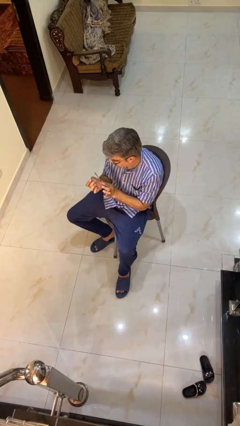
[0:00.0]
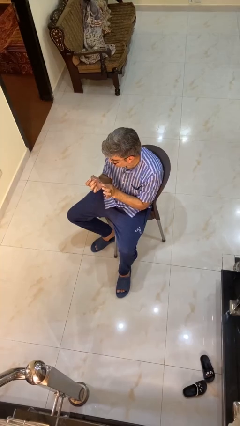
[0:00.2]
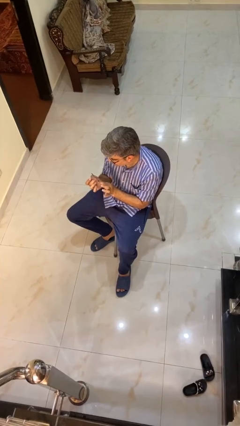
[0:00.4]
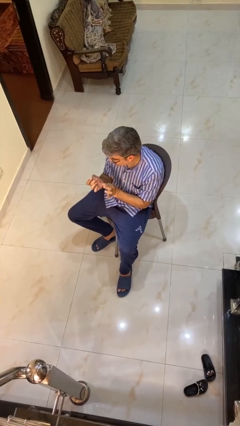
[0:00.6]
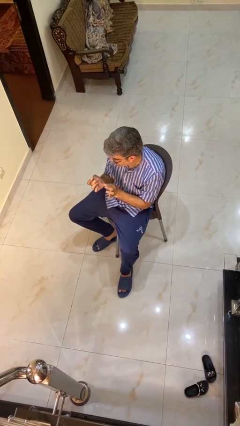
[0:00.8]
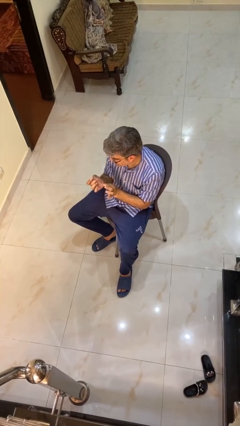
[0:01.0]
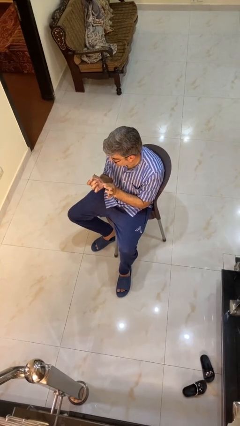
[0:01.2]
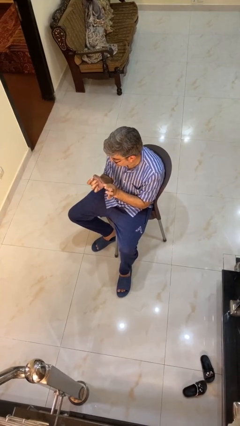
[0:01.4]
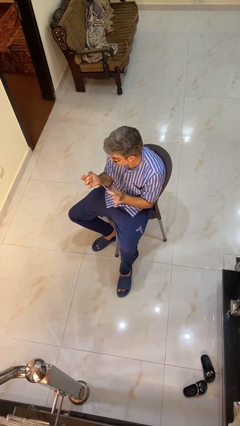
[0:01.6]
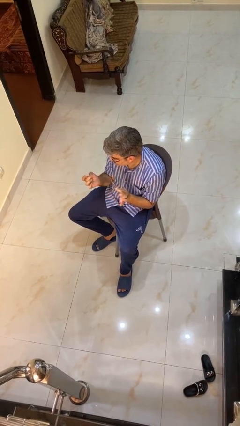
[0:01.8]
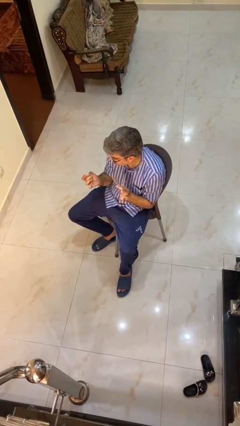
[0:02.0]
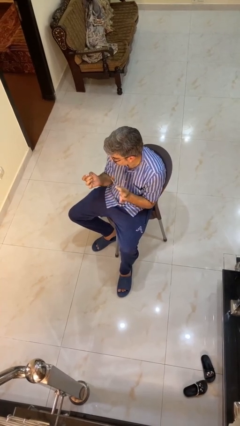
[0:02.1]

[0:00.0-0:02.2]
person files fingernails

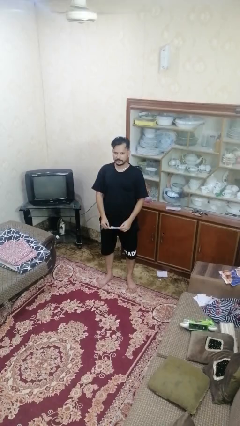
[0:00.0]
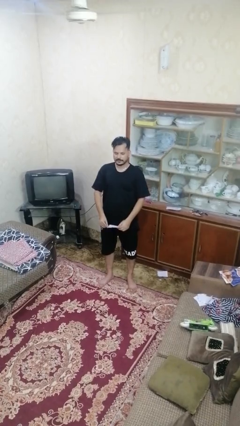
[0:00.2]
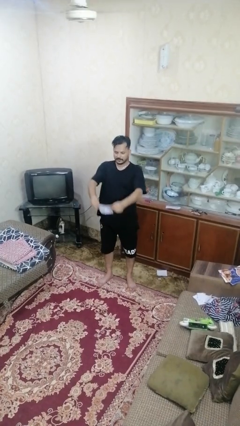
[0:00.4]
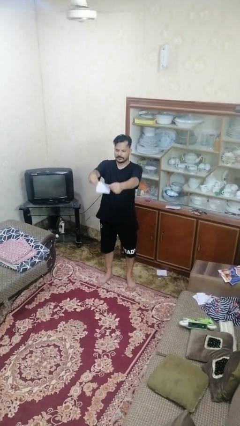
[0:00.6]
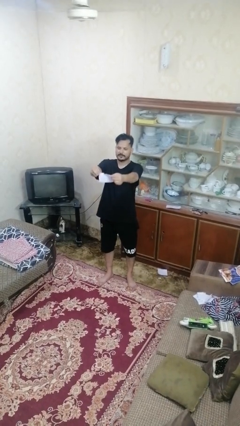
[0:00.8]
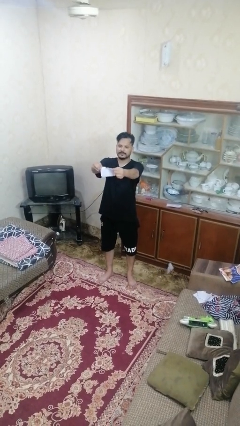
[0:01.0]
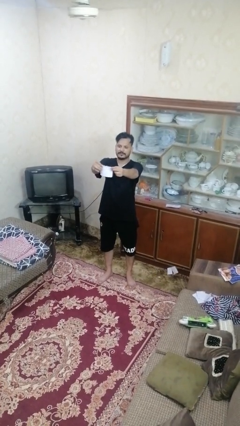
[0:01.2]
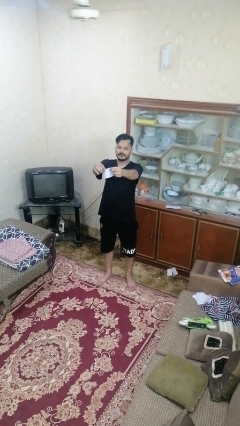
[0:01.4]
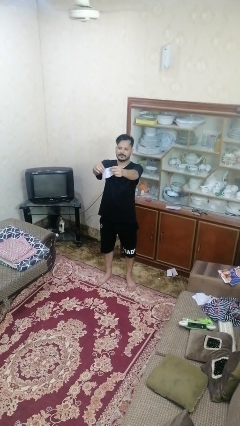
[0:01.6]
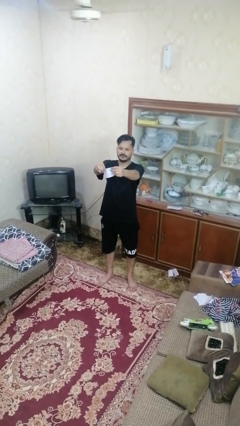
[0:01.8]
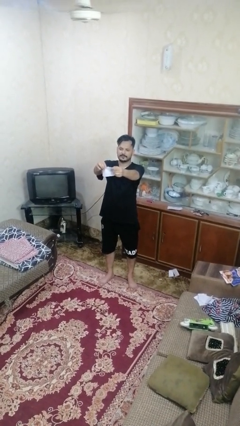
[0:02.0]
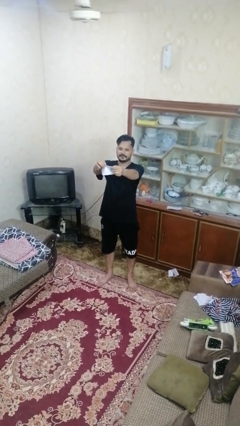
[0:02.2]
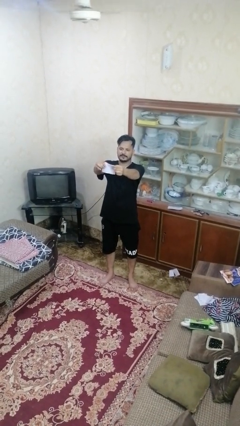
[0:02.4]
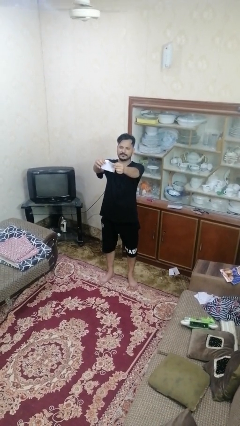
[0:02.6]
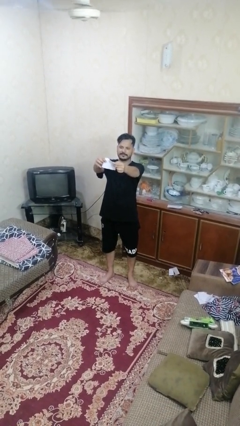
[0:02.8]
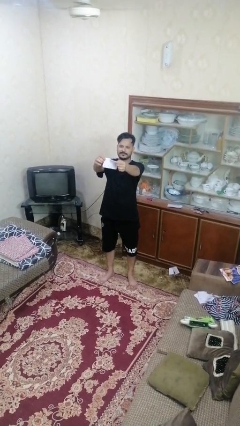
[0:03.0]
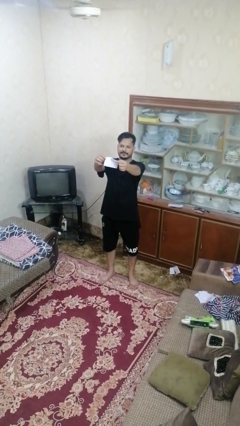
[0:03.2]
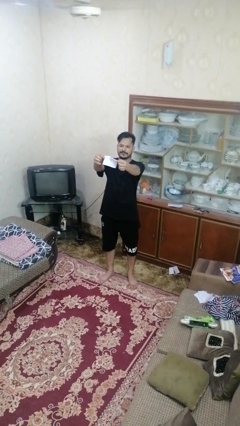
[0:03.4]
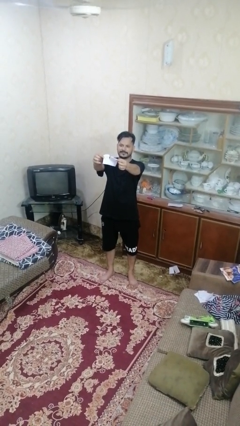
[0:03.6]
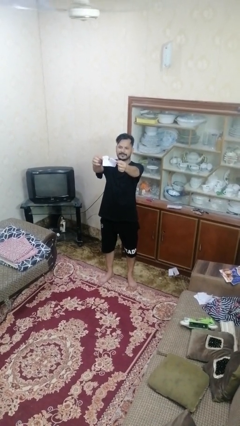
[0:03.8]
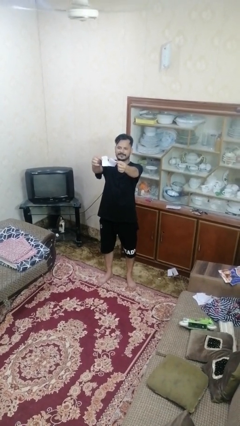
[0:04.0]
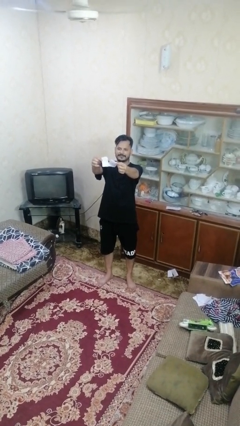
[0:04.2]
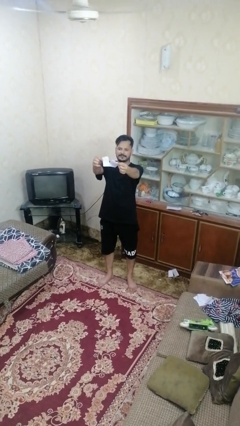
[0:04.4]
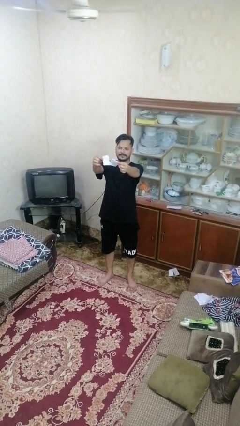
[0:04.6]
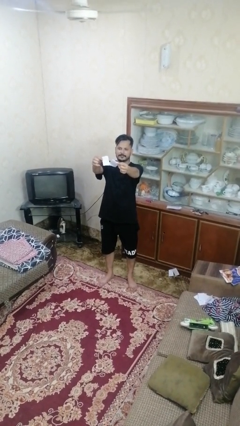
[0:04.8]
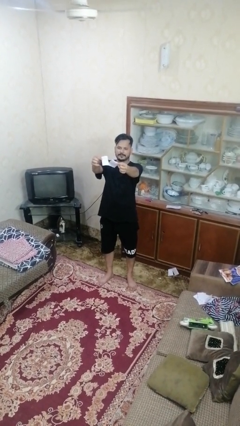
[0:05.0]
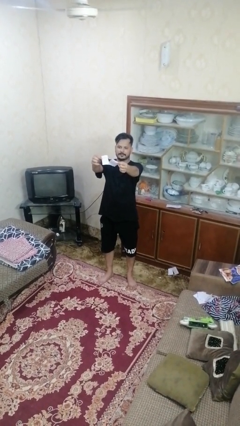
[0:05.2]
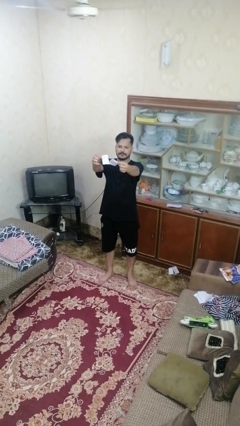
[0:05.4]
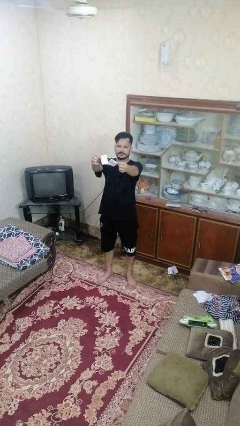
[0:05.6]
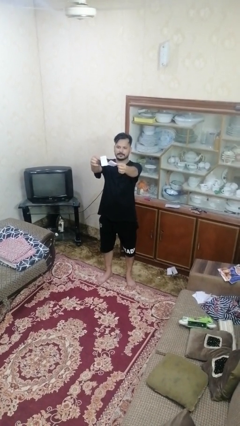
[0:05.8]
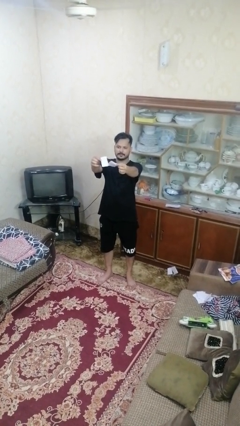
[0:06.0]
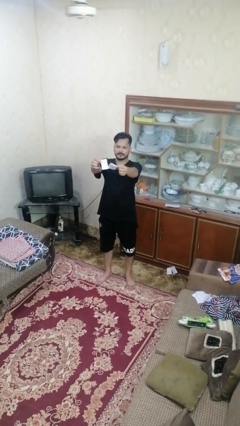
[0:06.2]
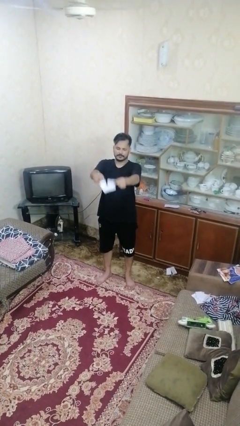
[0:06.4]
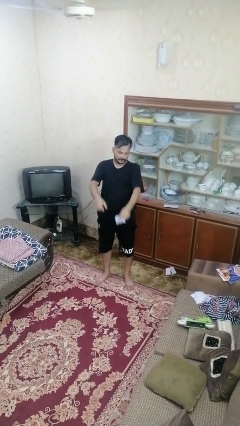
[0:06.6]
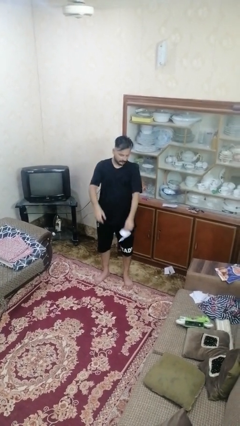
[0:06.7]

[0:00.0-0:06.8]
person tears paper

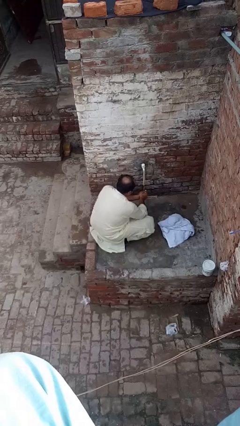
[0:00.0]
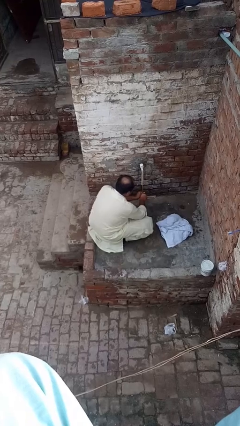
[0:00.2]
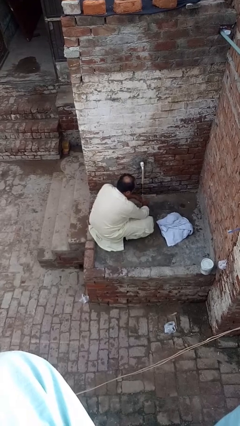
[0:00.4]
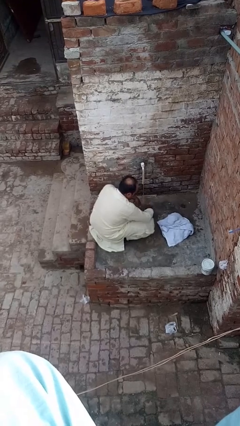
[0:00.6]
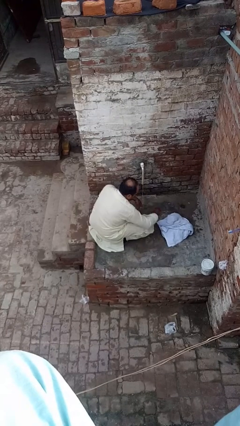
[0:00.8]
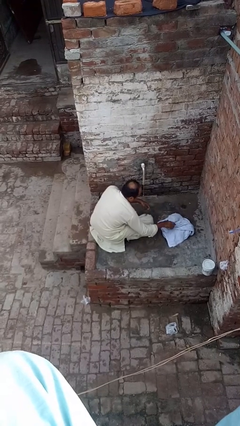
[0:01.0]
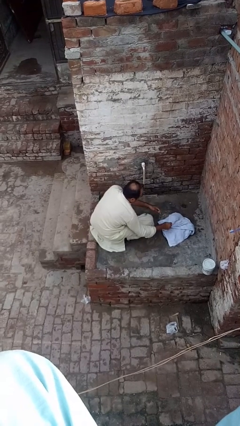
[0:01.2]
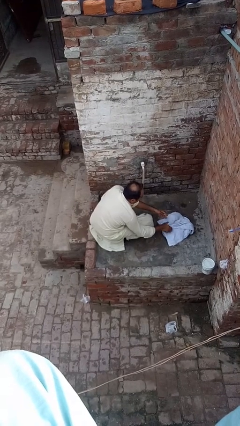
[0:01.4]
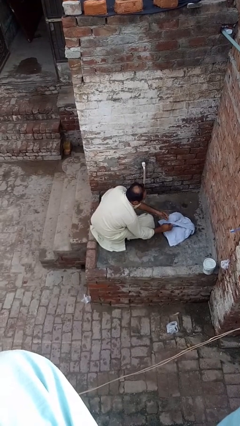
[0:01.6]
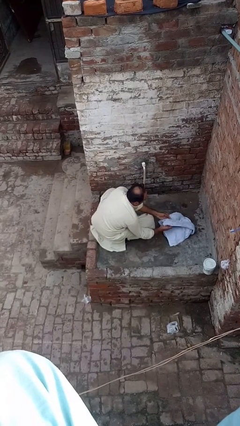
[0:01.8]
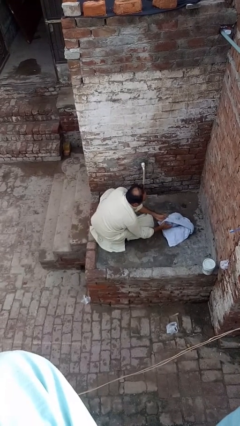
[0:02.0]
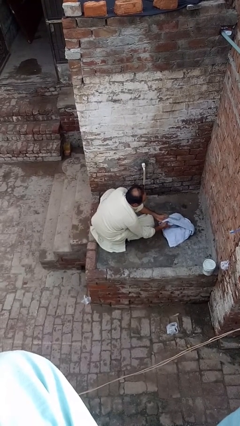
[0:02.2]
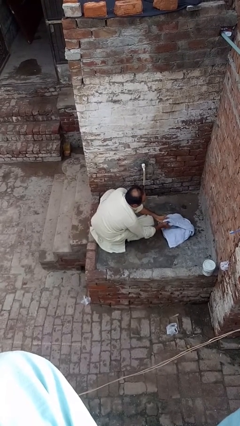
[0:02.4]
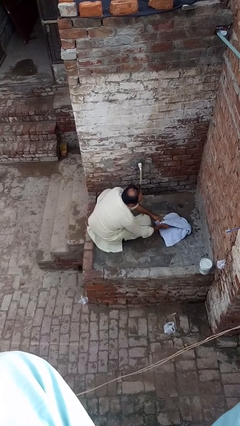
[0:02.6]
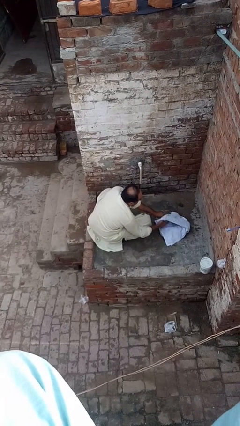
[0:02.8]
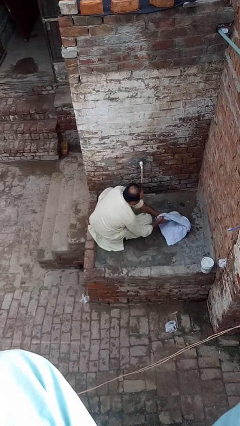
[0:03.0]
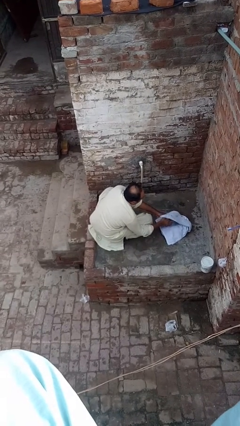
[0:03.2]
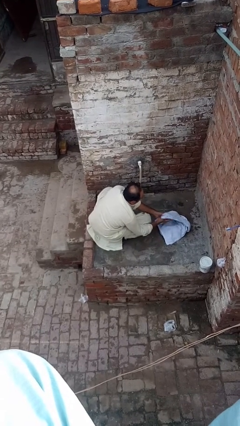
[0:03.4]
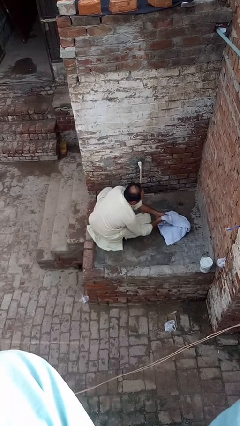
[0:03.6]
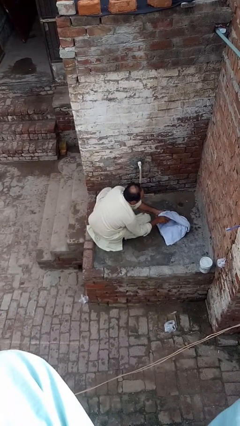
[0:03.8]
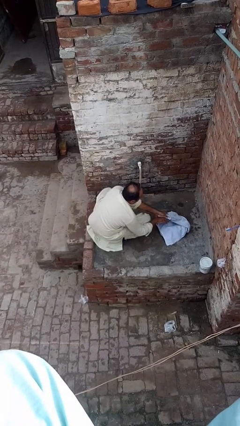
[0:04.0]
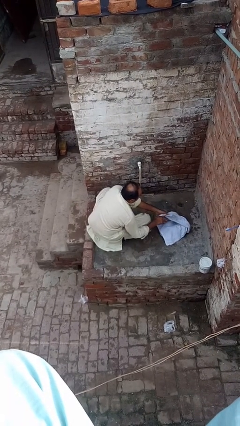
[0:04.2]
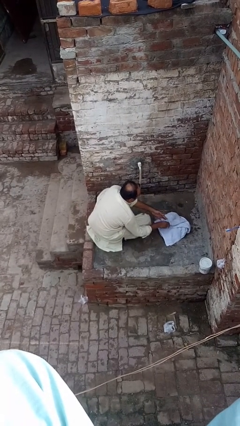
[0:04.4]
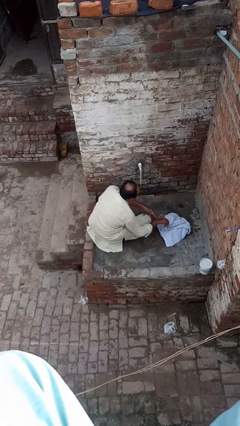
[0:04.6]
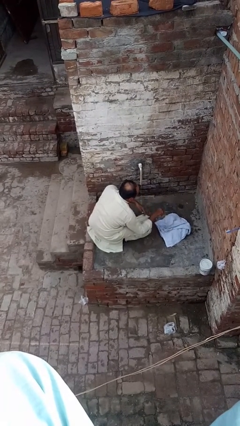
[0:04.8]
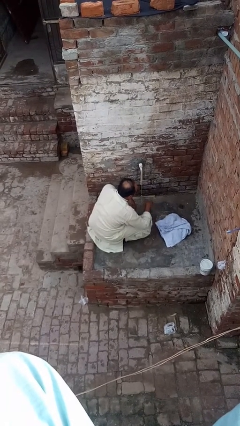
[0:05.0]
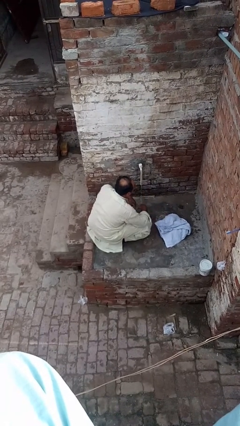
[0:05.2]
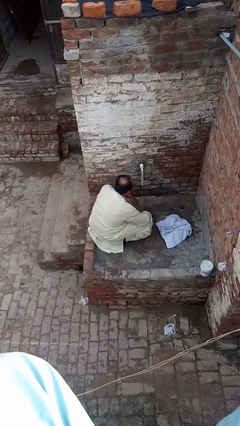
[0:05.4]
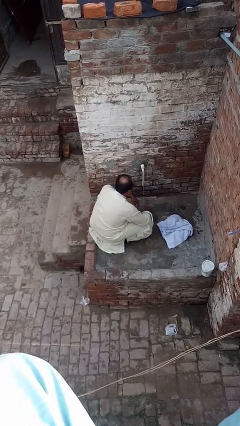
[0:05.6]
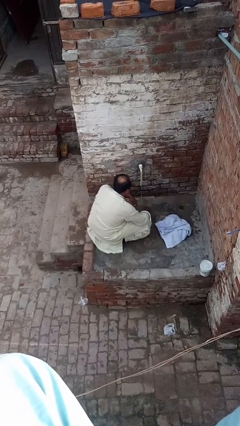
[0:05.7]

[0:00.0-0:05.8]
person dries hands with towel

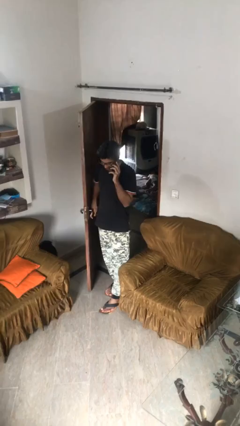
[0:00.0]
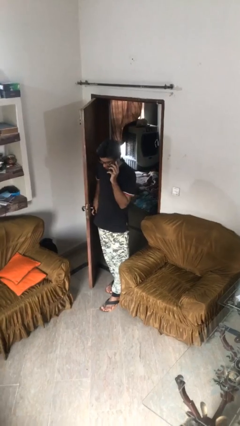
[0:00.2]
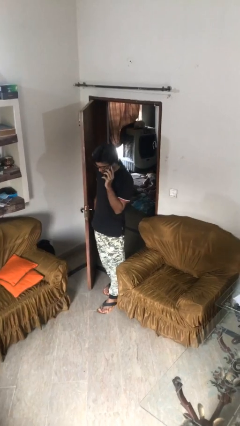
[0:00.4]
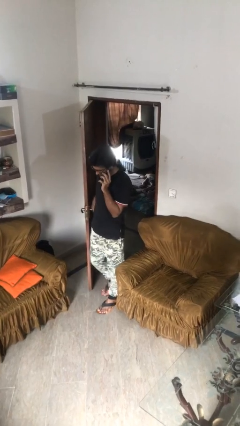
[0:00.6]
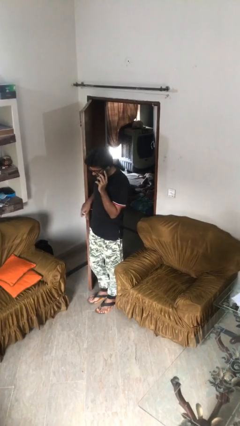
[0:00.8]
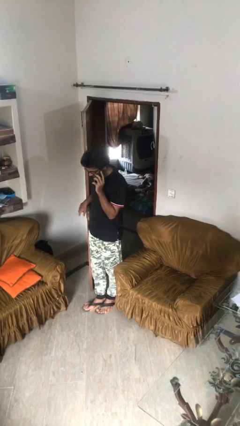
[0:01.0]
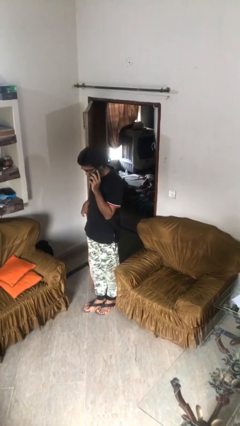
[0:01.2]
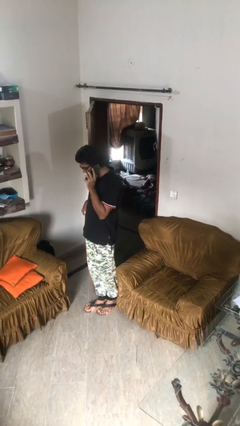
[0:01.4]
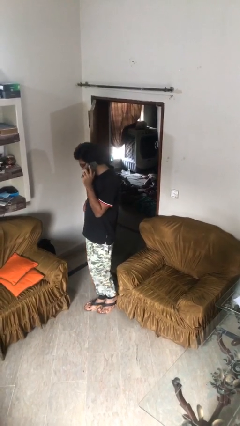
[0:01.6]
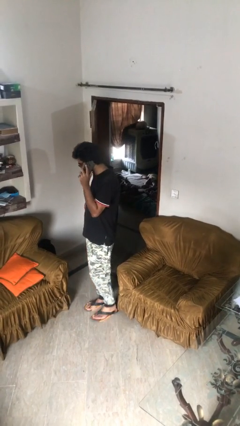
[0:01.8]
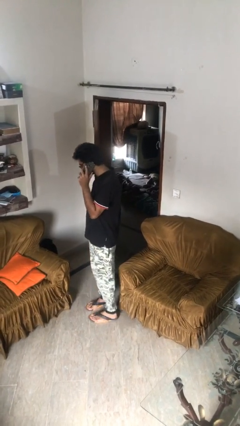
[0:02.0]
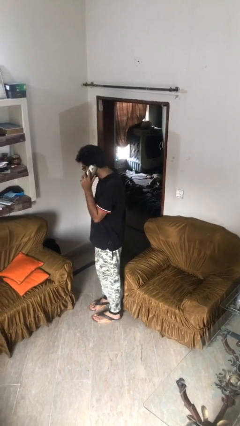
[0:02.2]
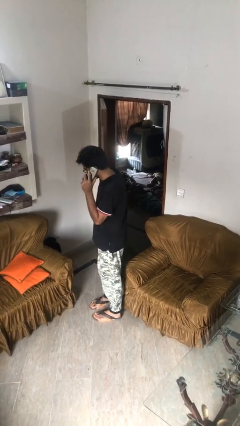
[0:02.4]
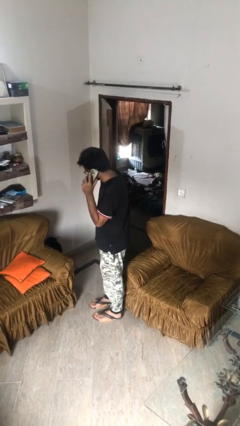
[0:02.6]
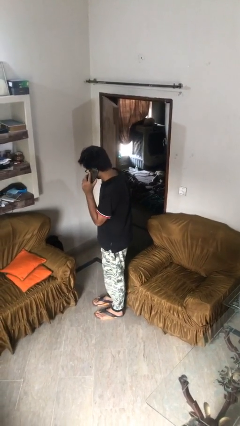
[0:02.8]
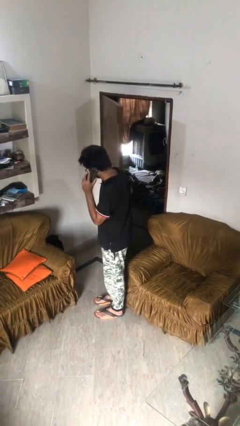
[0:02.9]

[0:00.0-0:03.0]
person enters scene through structure
